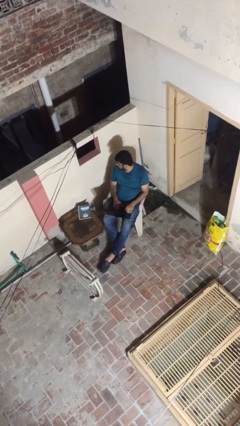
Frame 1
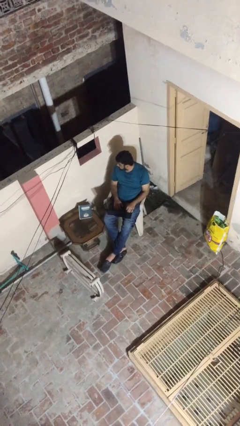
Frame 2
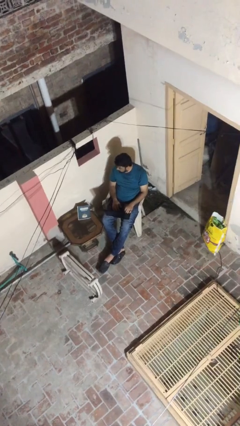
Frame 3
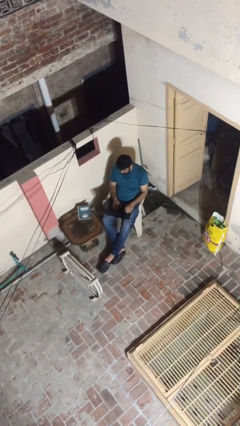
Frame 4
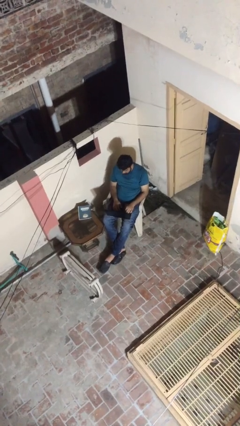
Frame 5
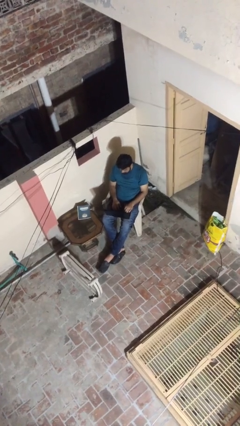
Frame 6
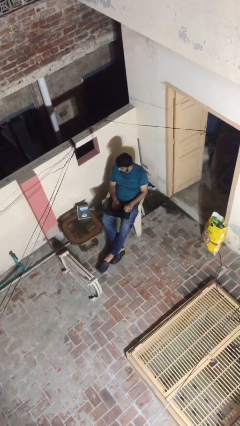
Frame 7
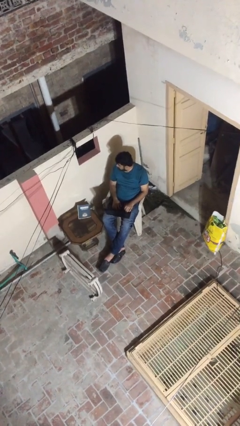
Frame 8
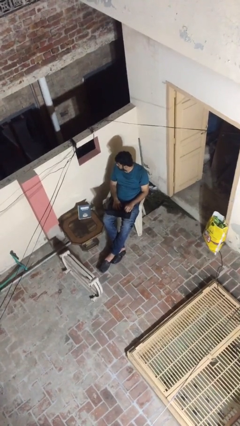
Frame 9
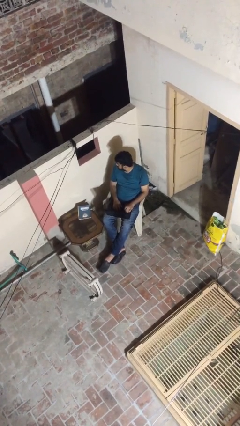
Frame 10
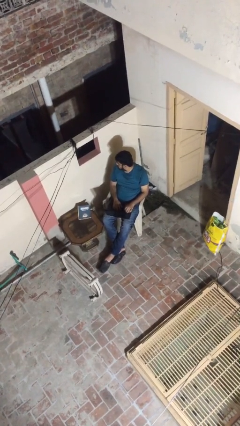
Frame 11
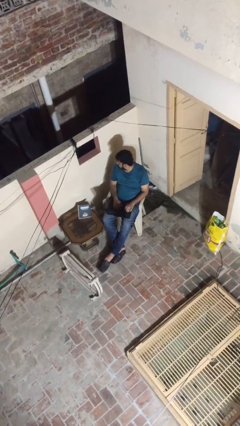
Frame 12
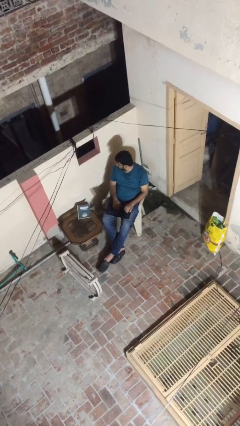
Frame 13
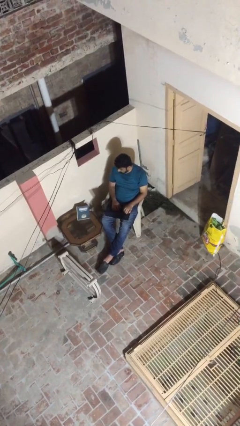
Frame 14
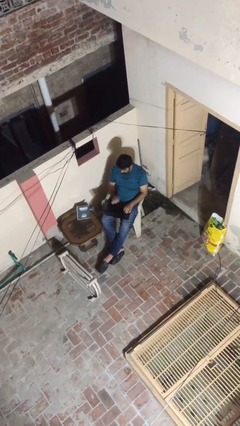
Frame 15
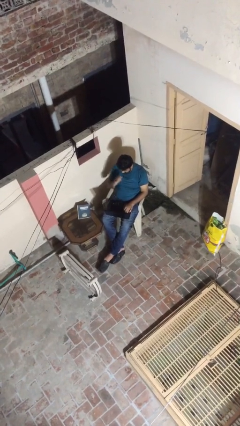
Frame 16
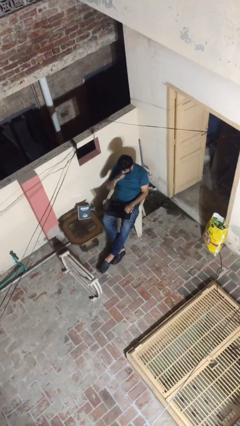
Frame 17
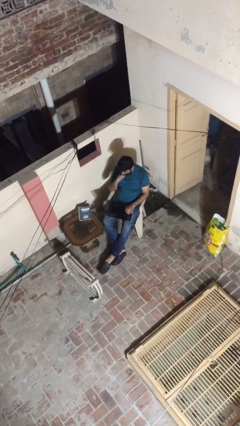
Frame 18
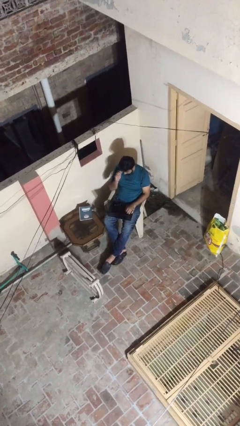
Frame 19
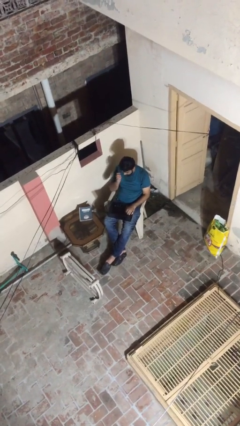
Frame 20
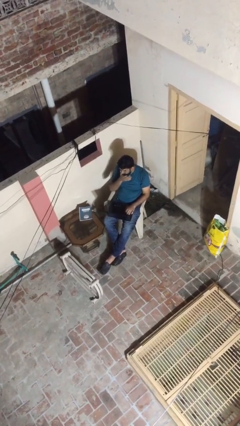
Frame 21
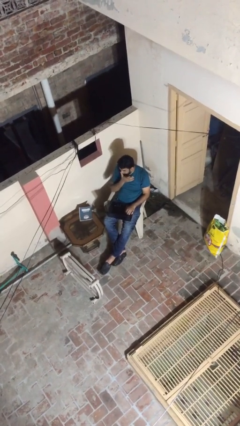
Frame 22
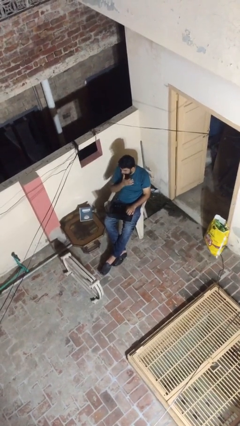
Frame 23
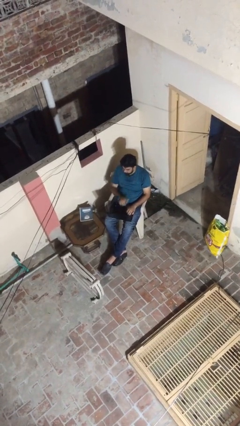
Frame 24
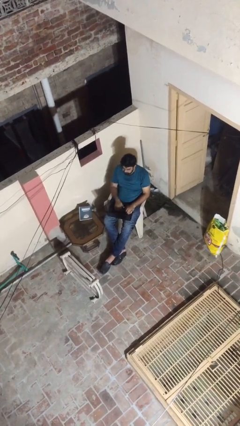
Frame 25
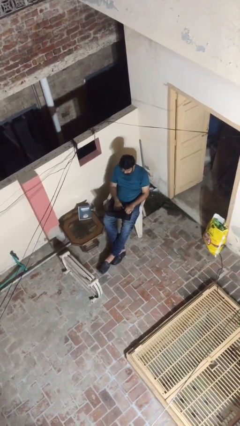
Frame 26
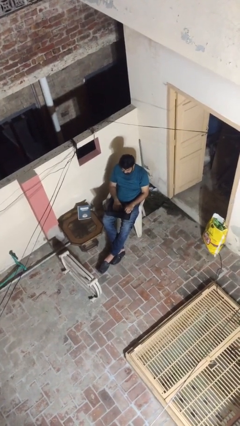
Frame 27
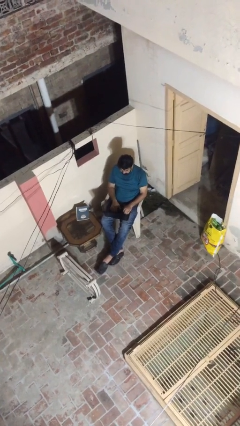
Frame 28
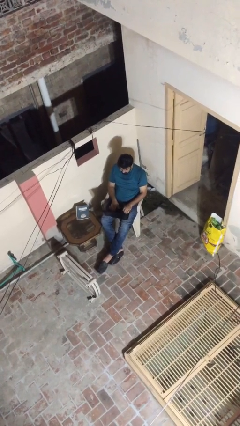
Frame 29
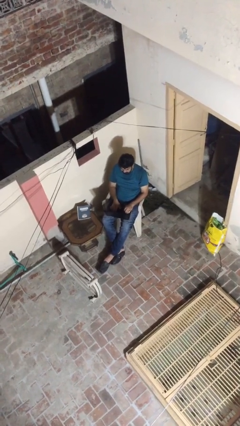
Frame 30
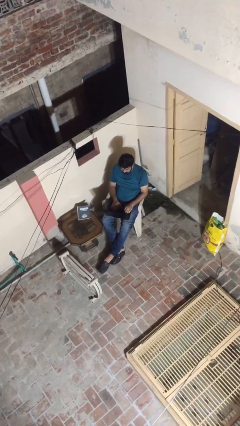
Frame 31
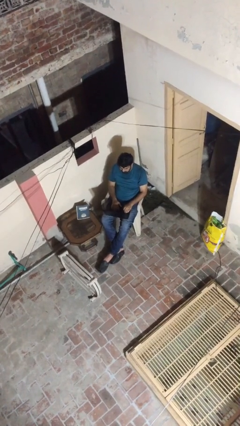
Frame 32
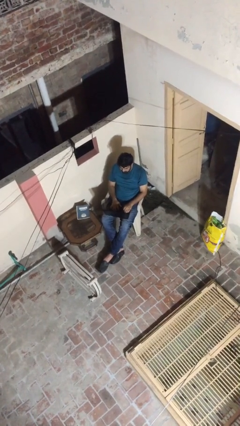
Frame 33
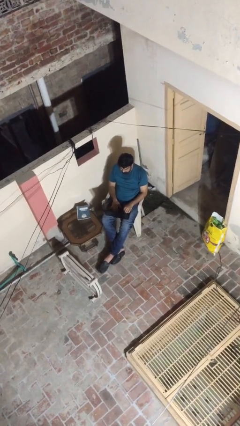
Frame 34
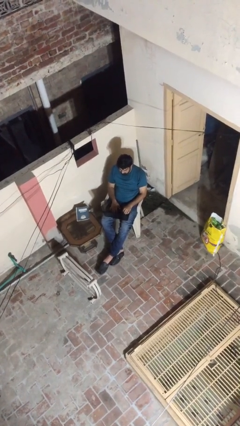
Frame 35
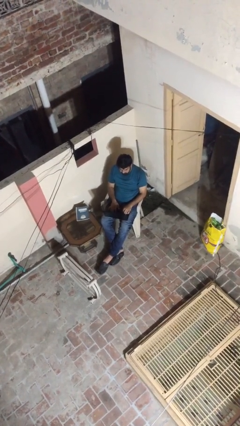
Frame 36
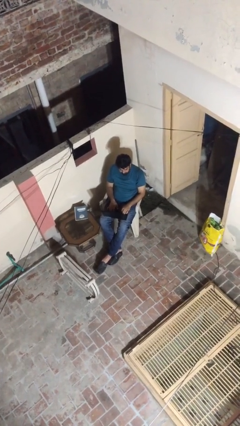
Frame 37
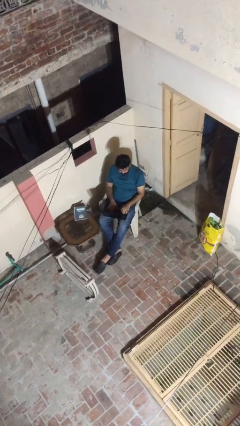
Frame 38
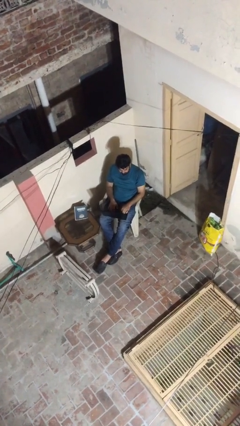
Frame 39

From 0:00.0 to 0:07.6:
person interacts with laptop

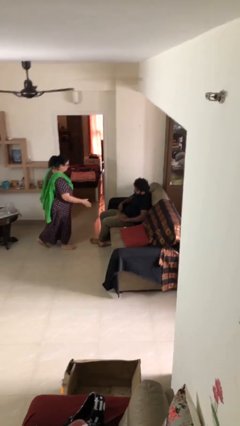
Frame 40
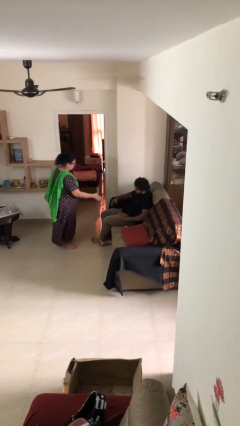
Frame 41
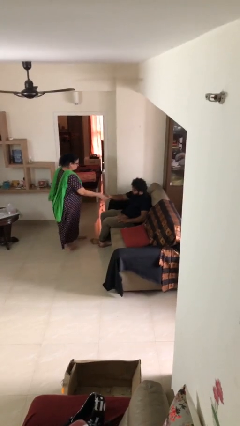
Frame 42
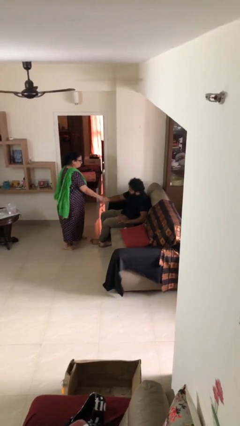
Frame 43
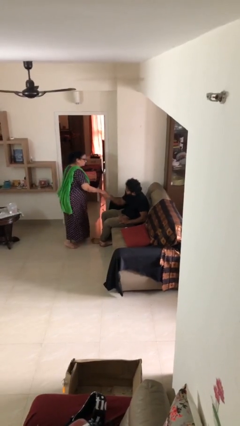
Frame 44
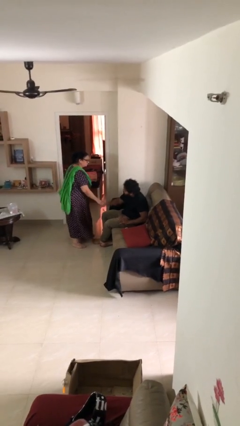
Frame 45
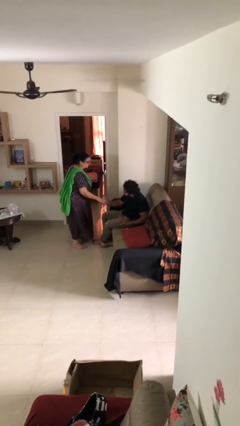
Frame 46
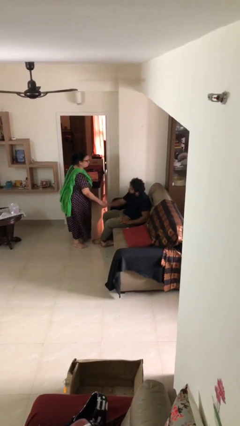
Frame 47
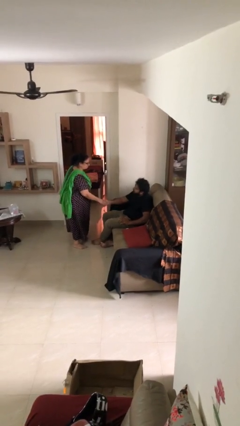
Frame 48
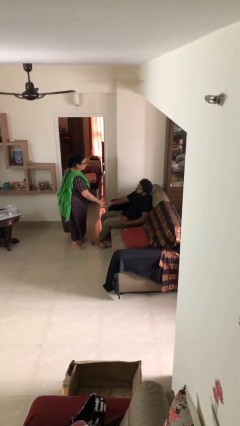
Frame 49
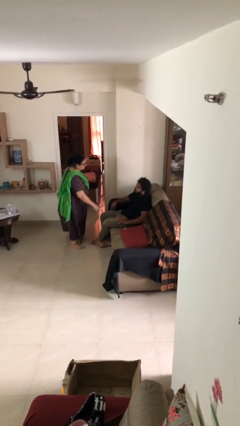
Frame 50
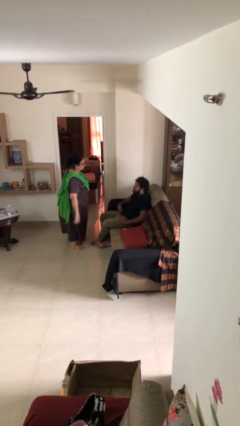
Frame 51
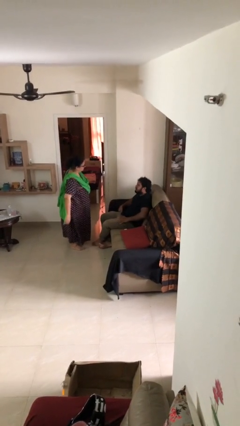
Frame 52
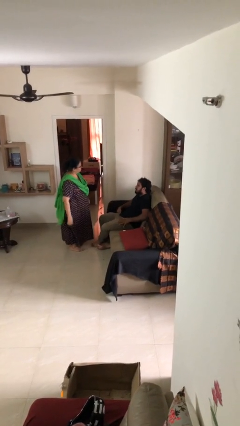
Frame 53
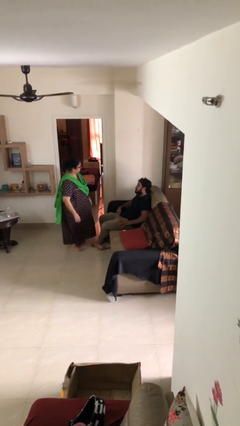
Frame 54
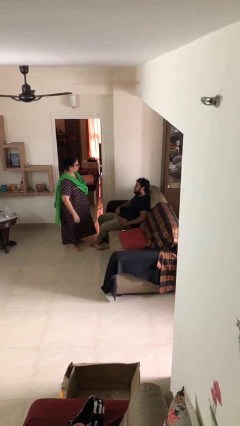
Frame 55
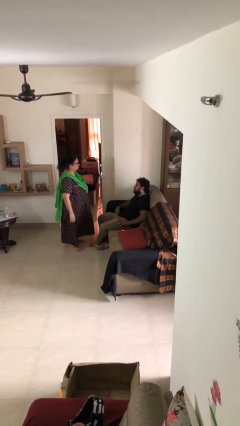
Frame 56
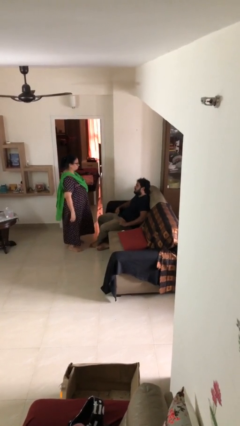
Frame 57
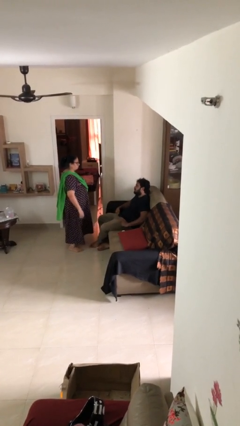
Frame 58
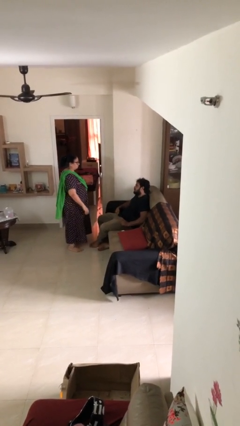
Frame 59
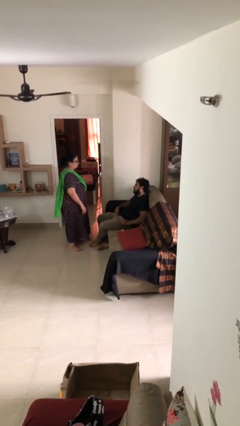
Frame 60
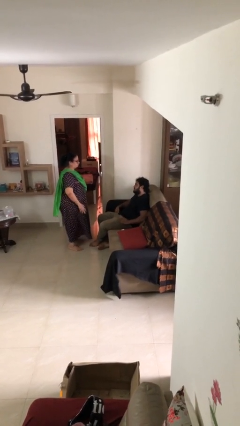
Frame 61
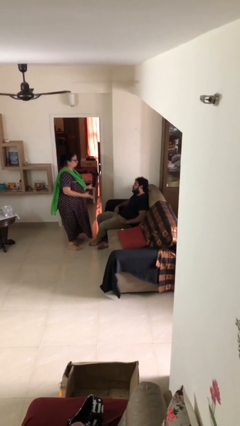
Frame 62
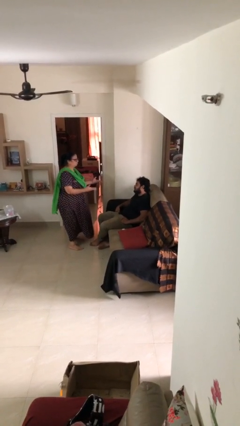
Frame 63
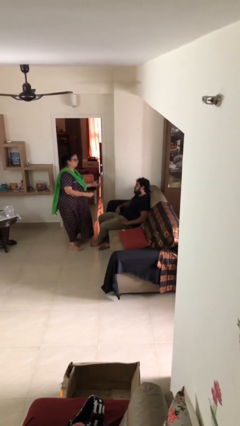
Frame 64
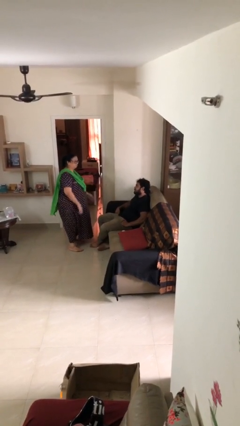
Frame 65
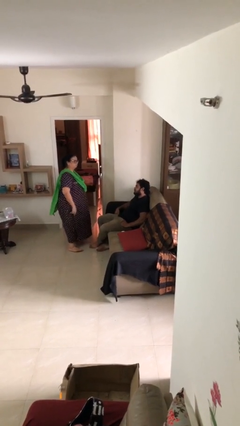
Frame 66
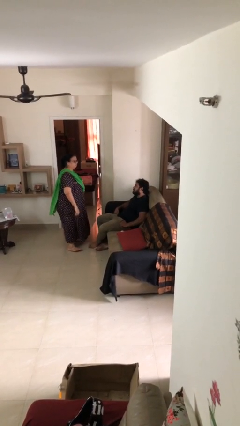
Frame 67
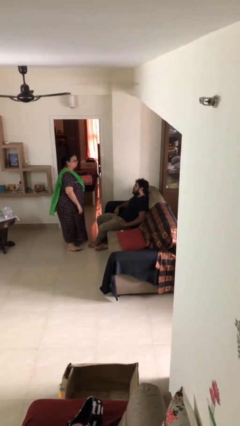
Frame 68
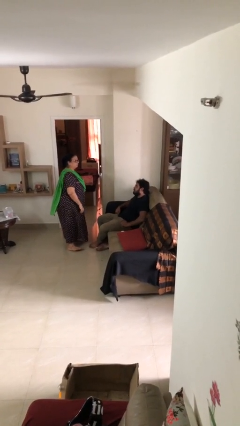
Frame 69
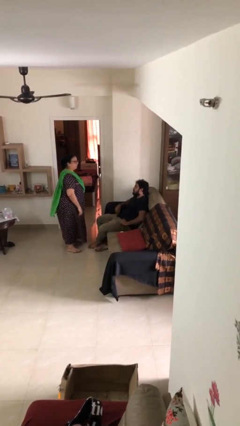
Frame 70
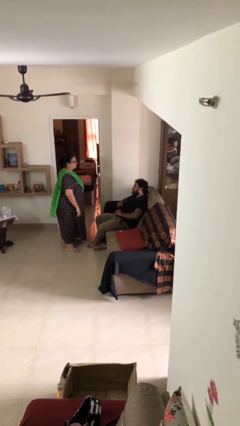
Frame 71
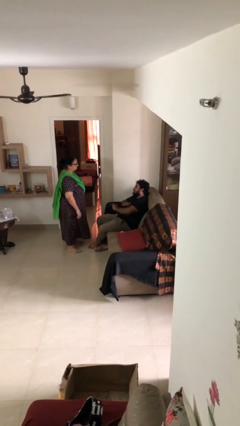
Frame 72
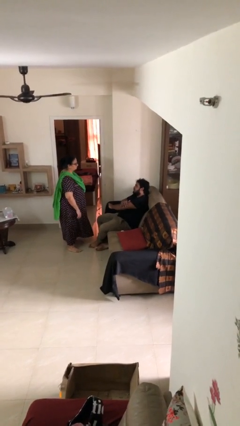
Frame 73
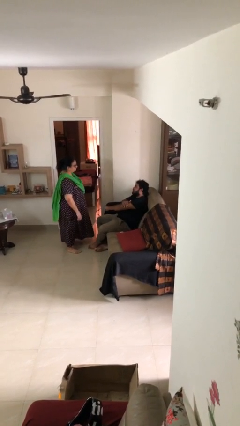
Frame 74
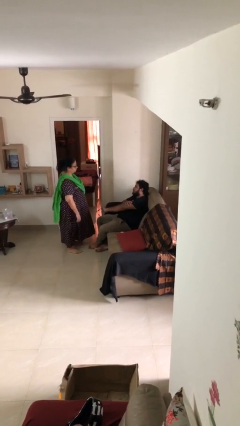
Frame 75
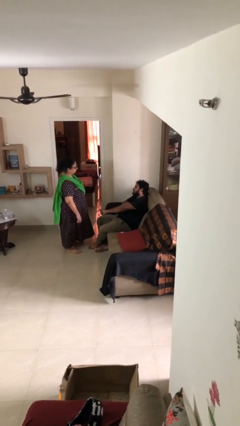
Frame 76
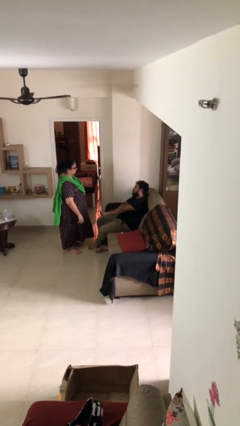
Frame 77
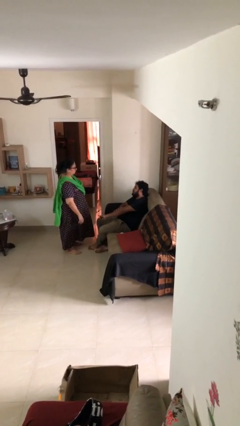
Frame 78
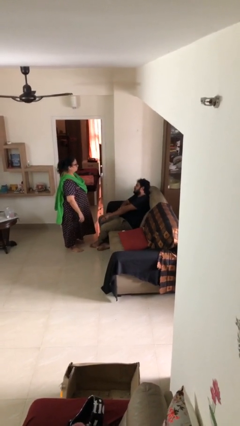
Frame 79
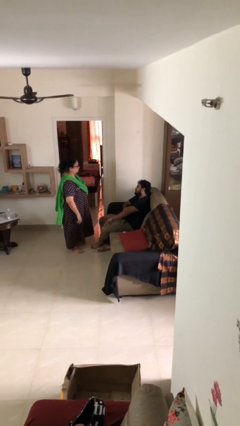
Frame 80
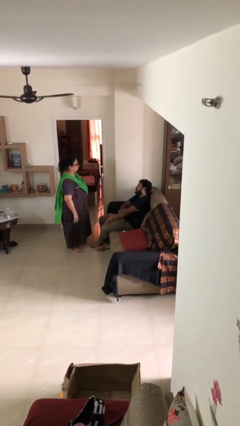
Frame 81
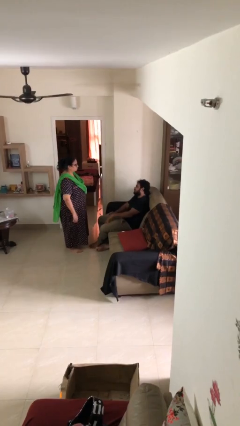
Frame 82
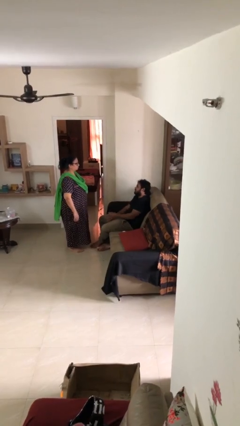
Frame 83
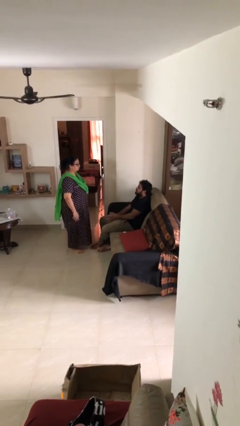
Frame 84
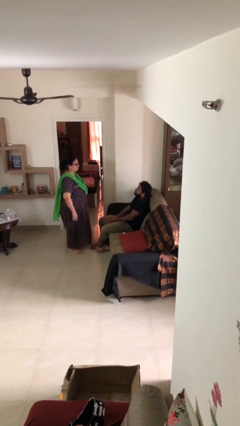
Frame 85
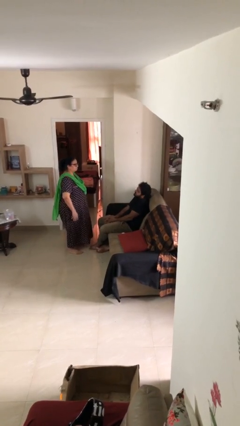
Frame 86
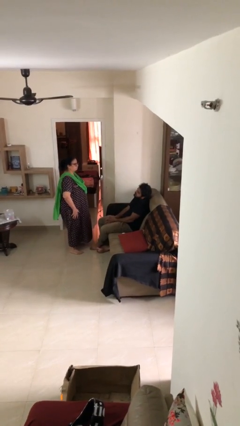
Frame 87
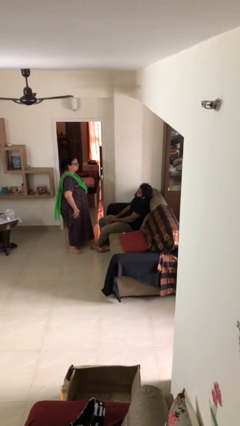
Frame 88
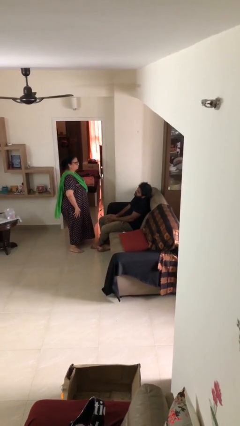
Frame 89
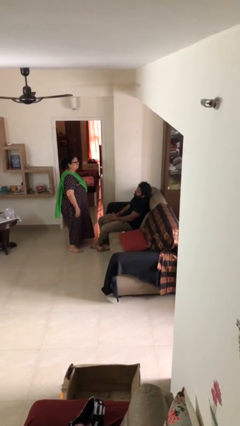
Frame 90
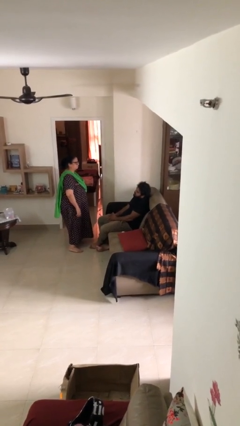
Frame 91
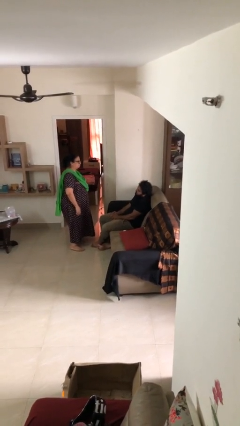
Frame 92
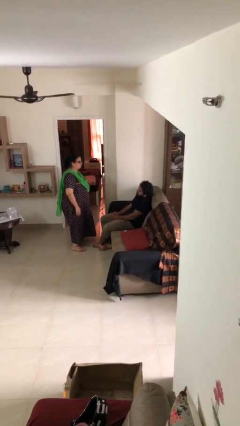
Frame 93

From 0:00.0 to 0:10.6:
person shakes hand
